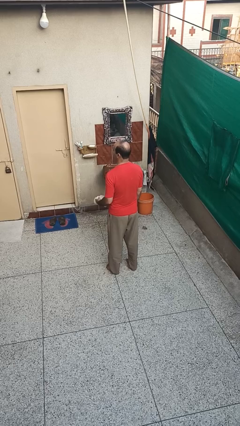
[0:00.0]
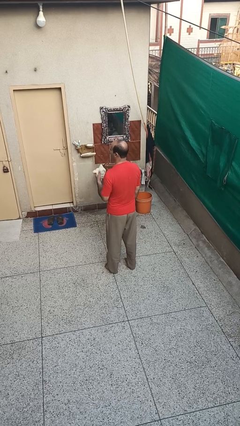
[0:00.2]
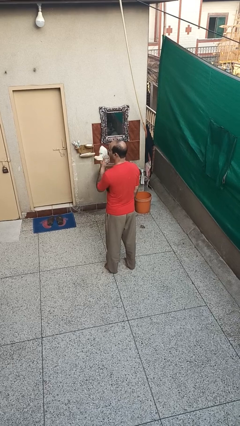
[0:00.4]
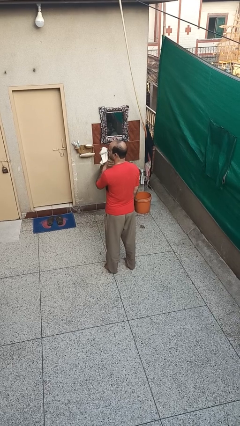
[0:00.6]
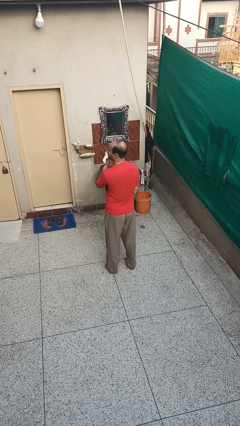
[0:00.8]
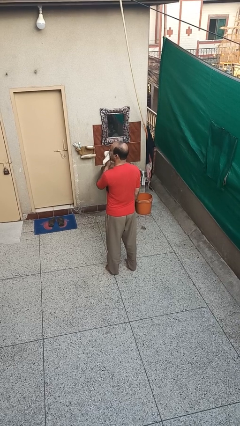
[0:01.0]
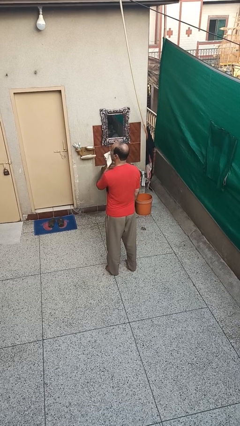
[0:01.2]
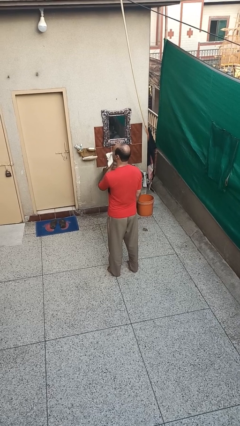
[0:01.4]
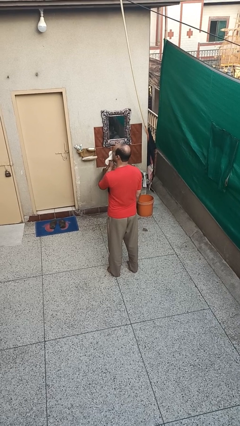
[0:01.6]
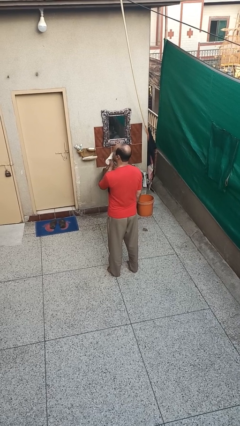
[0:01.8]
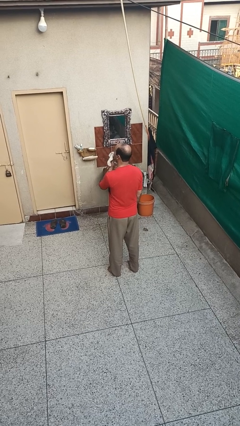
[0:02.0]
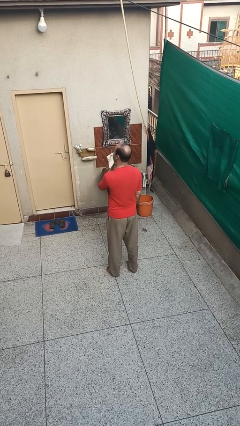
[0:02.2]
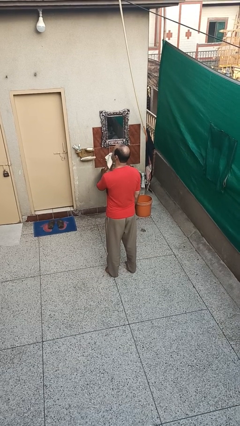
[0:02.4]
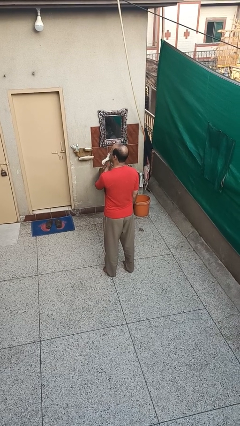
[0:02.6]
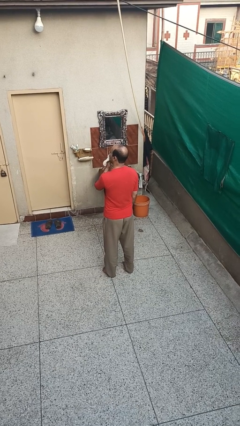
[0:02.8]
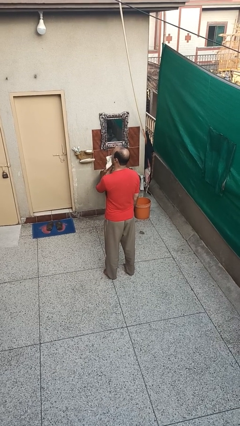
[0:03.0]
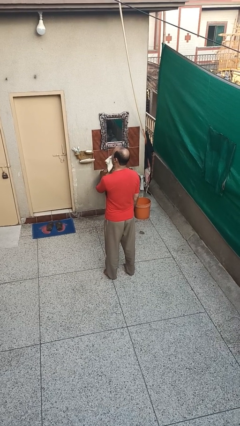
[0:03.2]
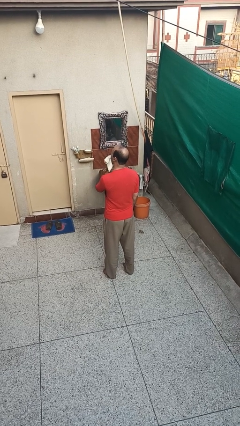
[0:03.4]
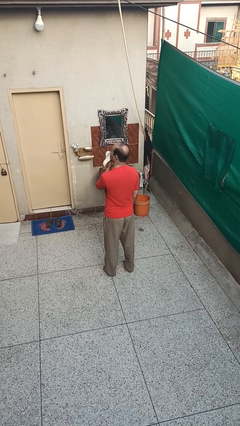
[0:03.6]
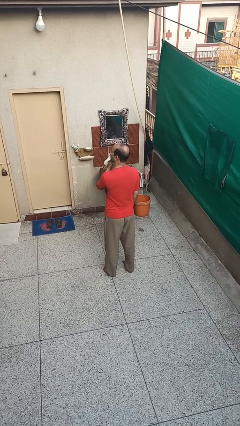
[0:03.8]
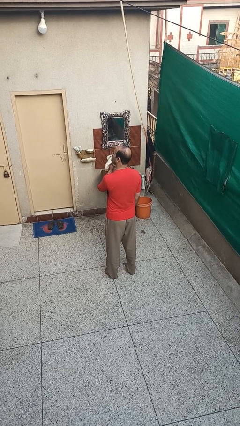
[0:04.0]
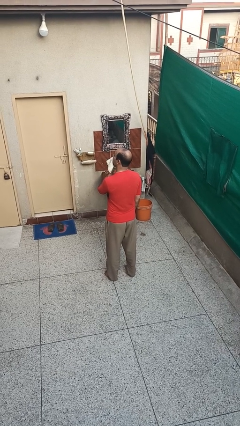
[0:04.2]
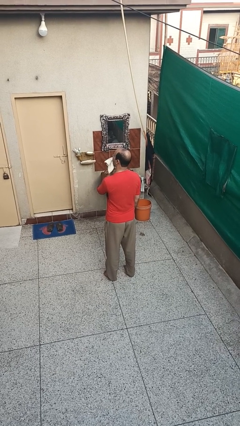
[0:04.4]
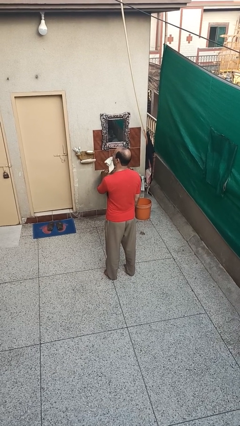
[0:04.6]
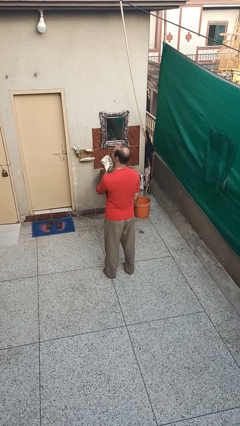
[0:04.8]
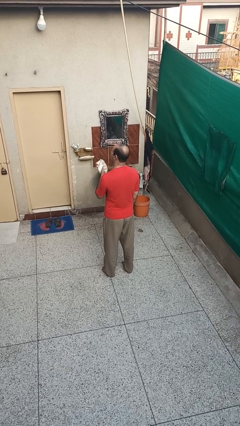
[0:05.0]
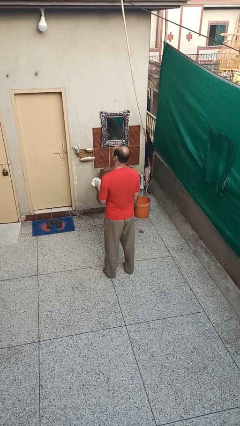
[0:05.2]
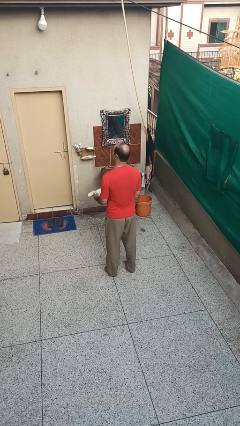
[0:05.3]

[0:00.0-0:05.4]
person wipes mouth with napkin

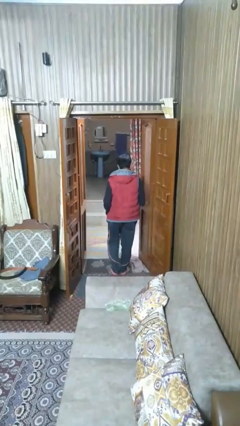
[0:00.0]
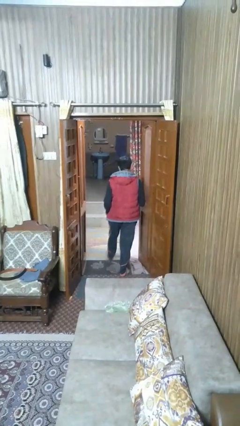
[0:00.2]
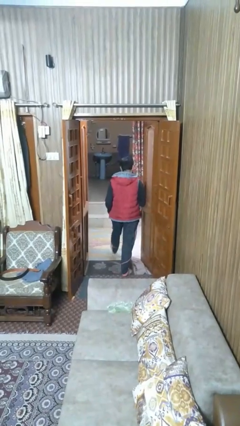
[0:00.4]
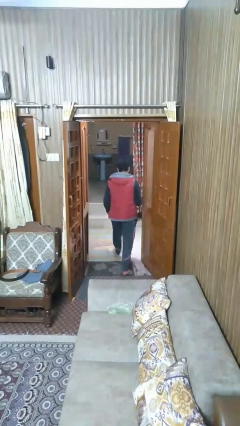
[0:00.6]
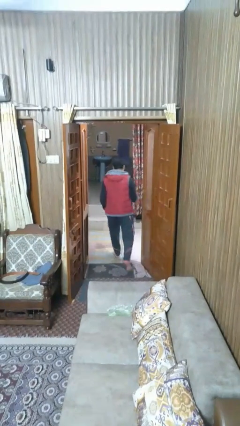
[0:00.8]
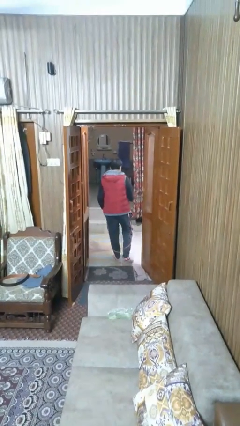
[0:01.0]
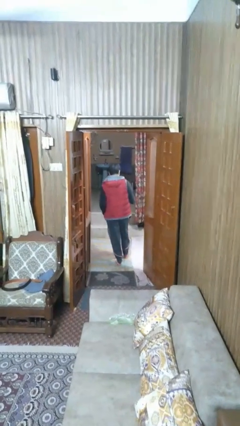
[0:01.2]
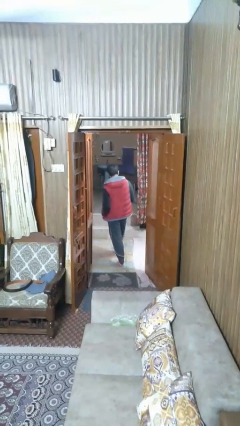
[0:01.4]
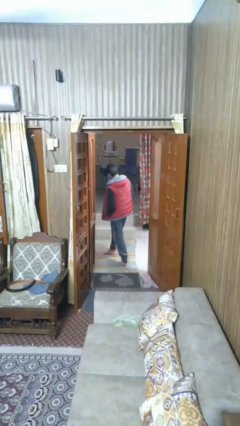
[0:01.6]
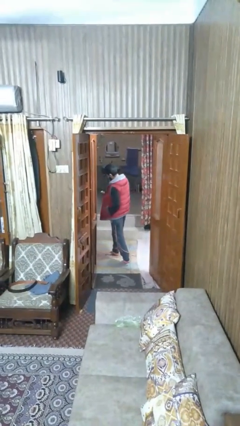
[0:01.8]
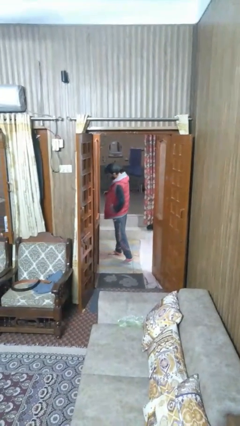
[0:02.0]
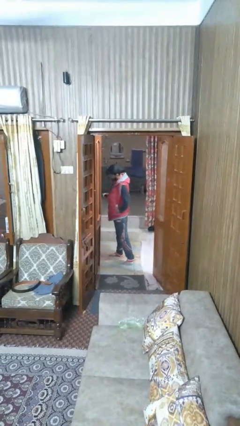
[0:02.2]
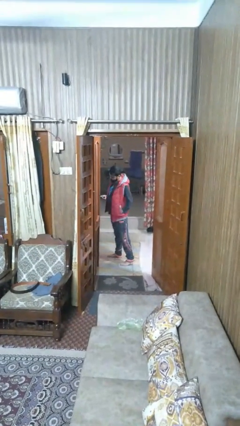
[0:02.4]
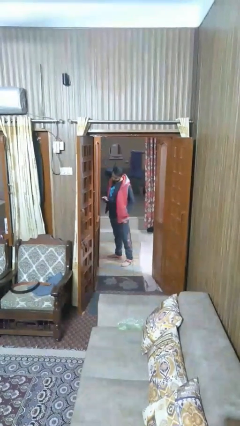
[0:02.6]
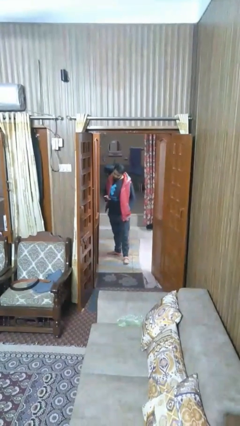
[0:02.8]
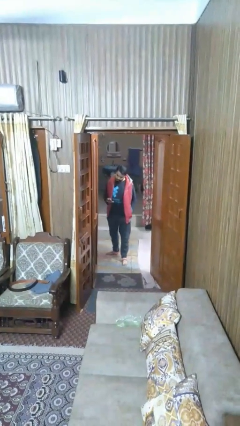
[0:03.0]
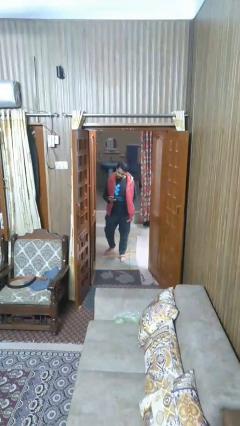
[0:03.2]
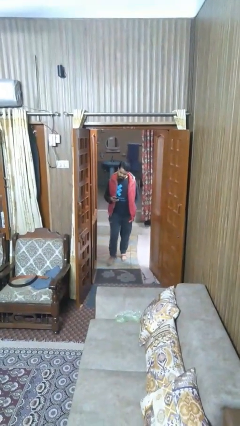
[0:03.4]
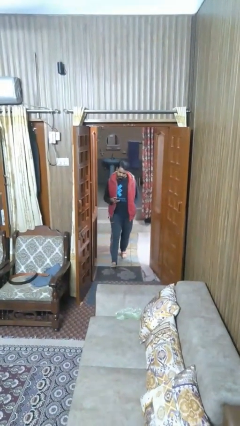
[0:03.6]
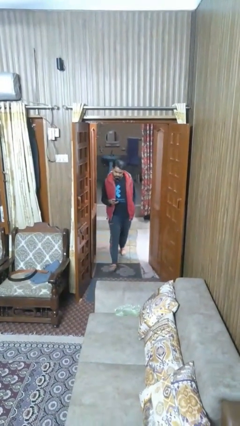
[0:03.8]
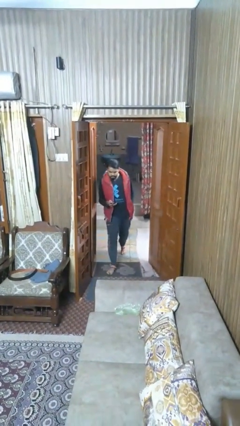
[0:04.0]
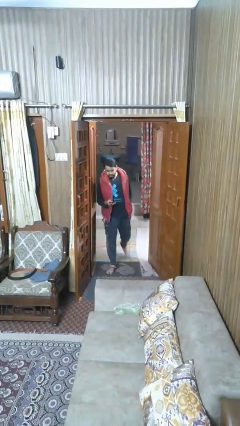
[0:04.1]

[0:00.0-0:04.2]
person exits scene through structure

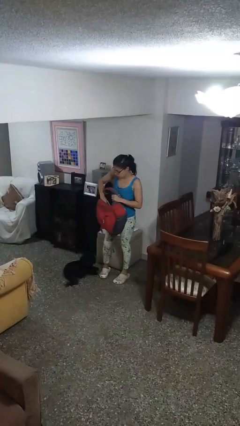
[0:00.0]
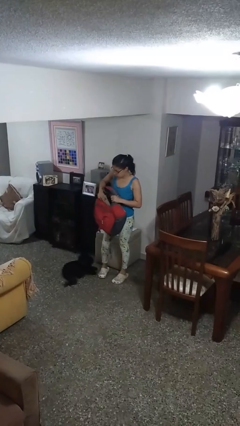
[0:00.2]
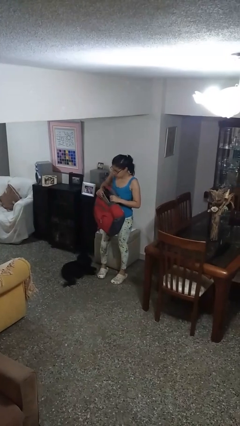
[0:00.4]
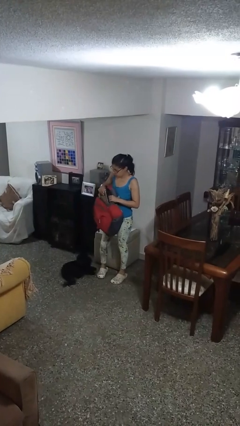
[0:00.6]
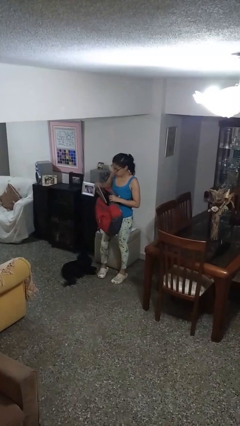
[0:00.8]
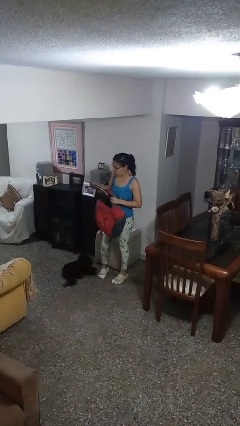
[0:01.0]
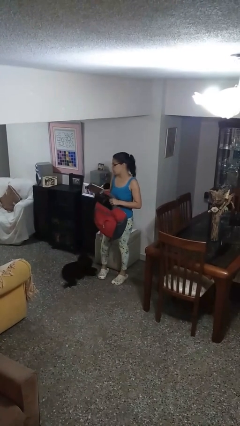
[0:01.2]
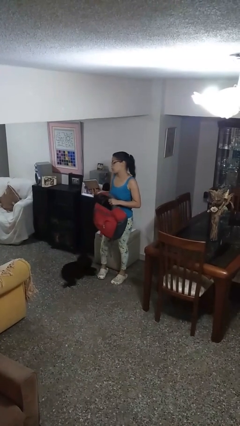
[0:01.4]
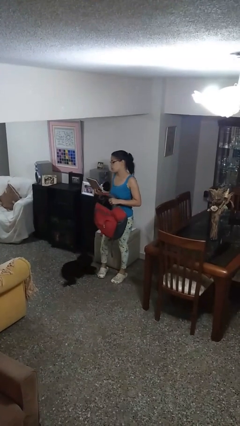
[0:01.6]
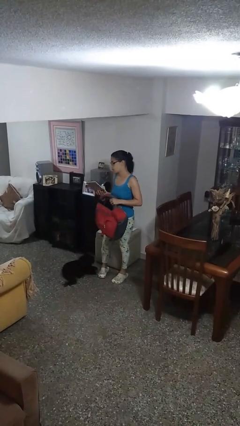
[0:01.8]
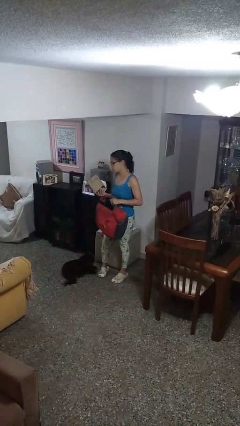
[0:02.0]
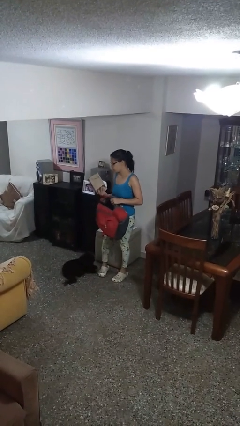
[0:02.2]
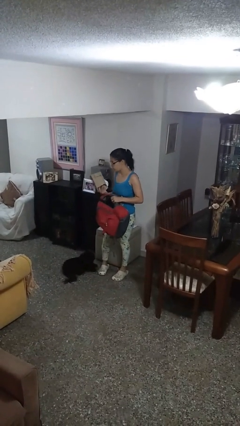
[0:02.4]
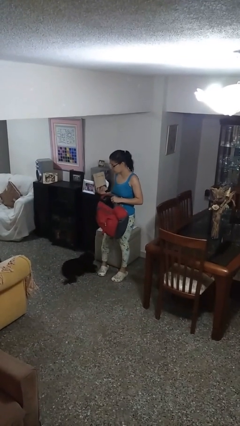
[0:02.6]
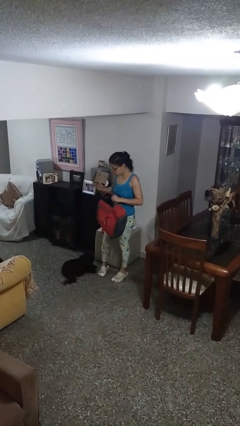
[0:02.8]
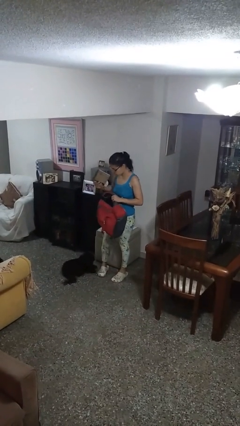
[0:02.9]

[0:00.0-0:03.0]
person takes object from backpack

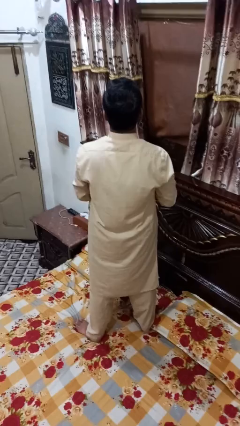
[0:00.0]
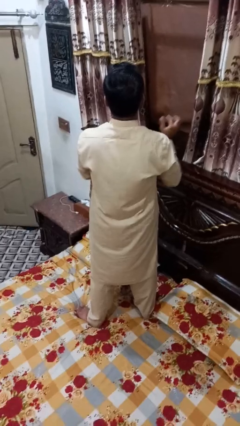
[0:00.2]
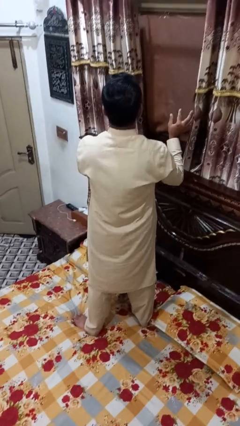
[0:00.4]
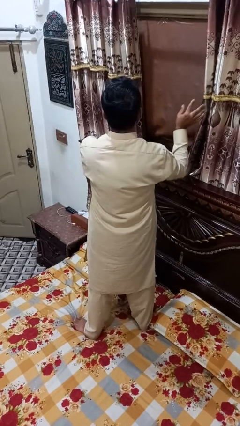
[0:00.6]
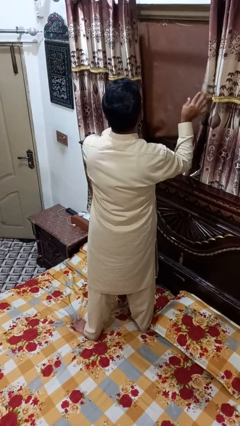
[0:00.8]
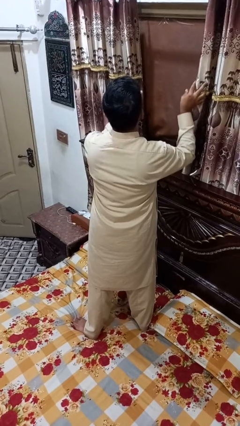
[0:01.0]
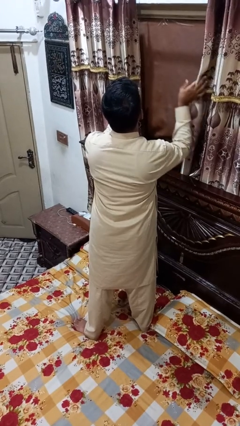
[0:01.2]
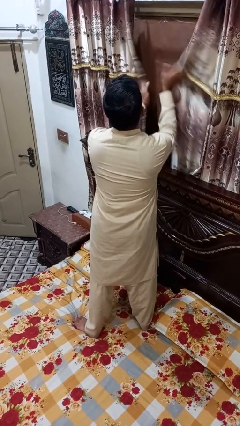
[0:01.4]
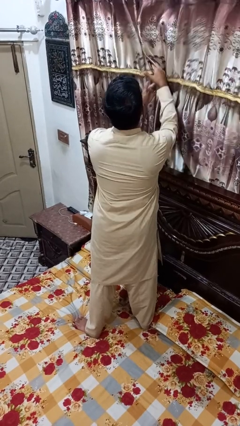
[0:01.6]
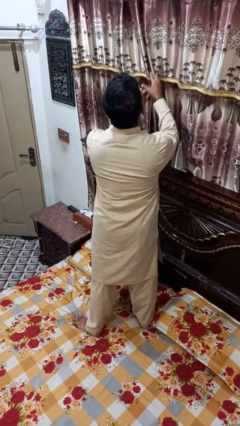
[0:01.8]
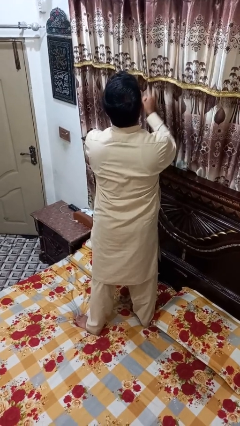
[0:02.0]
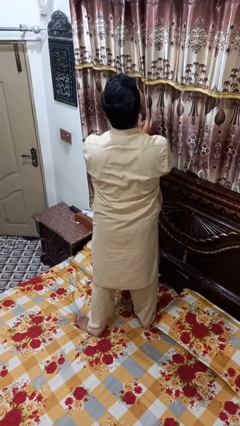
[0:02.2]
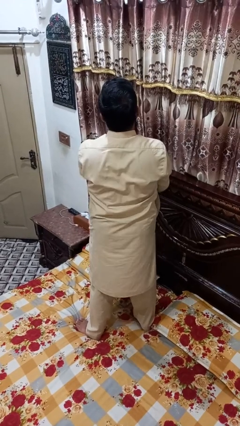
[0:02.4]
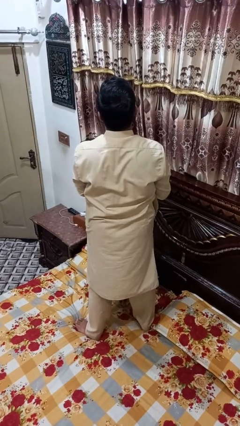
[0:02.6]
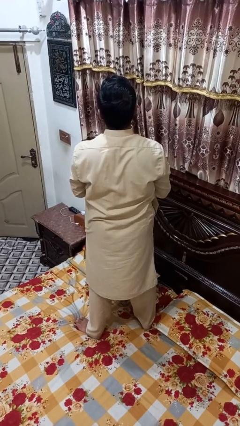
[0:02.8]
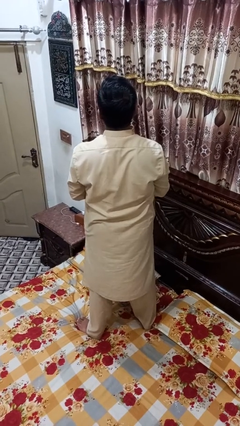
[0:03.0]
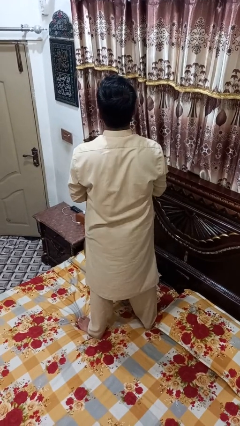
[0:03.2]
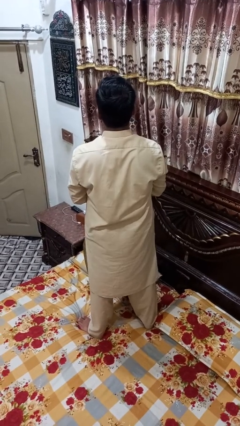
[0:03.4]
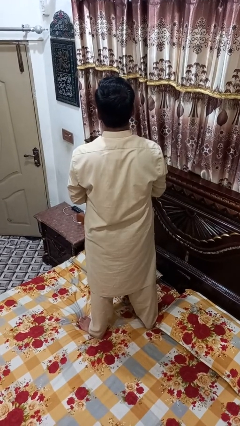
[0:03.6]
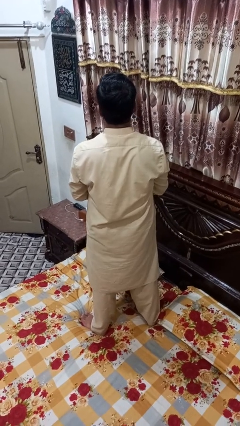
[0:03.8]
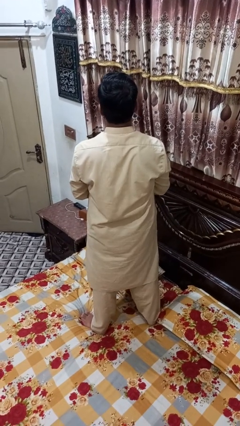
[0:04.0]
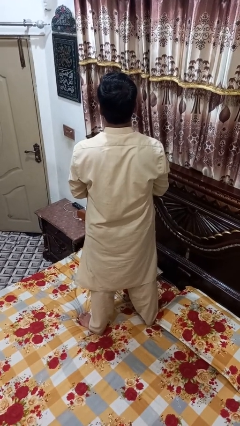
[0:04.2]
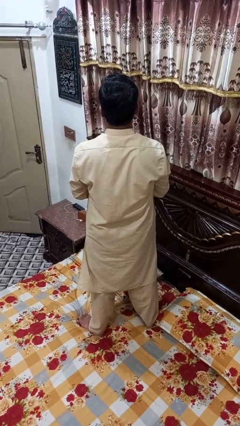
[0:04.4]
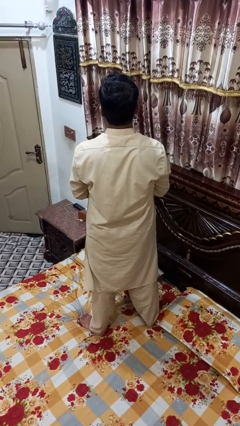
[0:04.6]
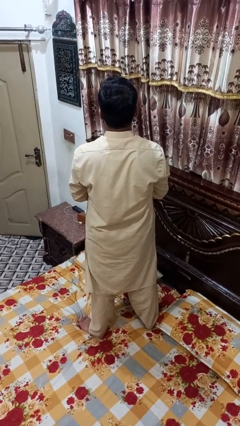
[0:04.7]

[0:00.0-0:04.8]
person closes curtains
